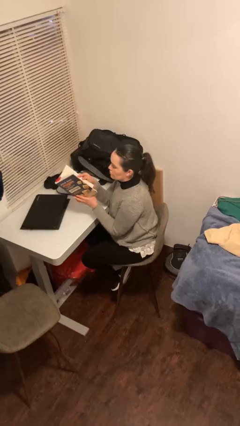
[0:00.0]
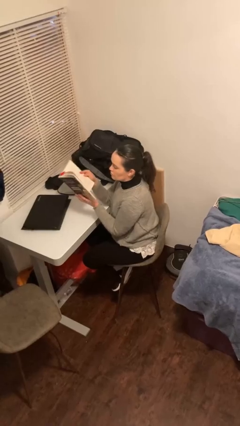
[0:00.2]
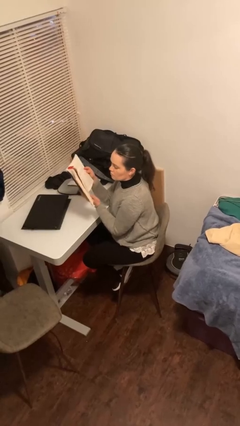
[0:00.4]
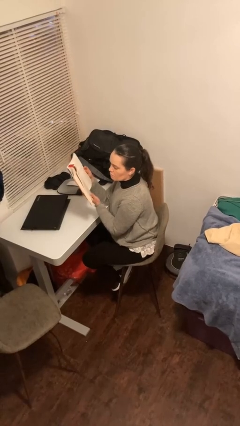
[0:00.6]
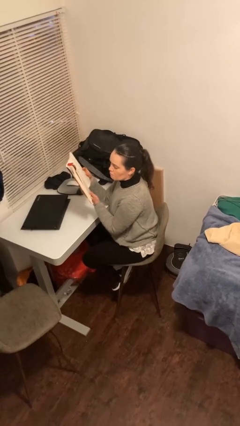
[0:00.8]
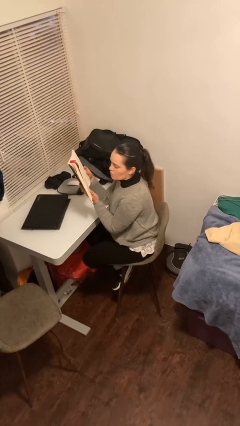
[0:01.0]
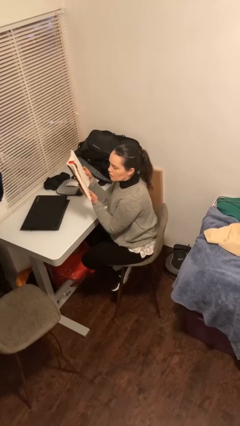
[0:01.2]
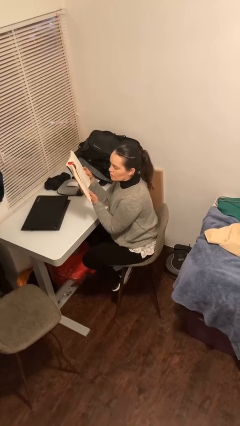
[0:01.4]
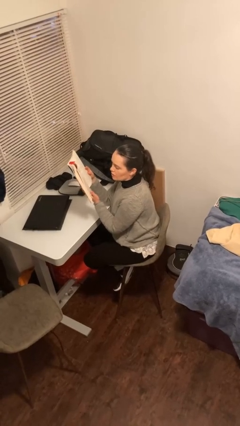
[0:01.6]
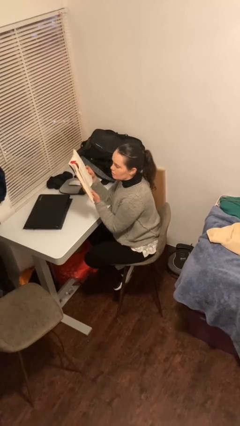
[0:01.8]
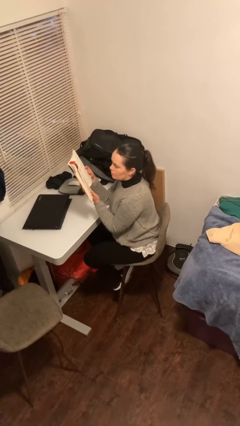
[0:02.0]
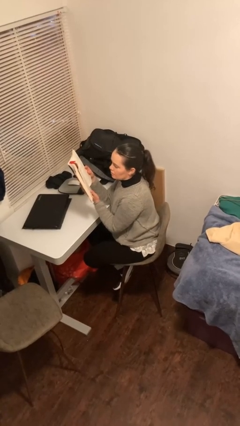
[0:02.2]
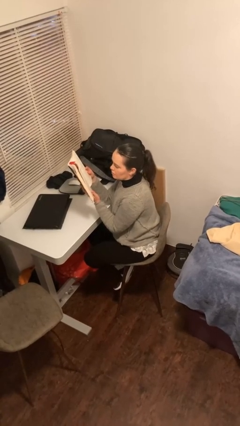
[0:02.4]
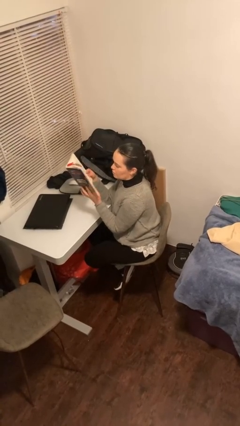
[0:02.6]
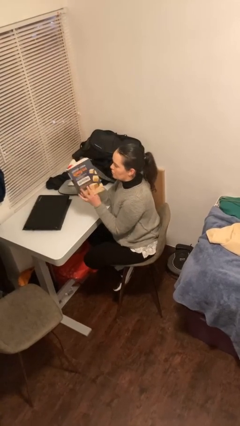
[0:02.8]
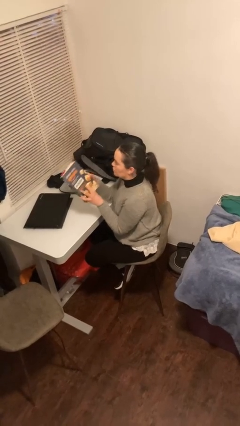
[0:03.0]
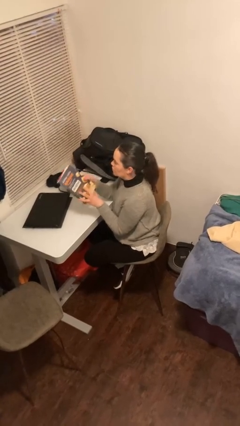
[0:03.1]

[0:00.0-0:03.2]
person reads document

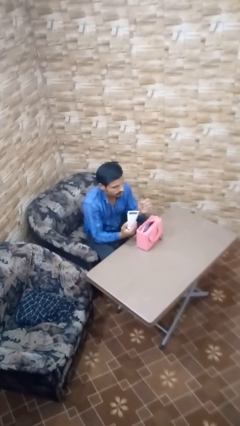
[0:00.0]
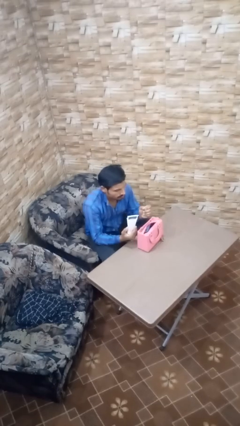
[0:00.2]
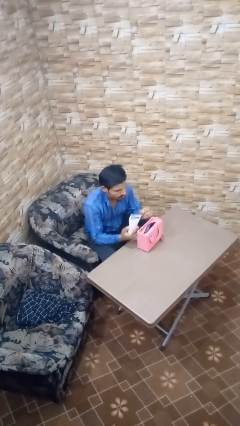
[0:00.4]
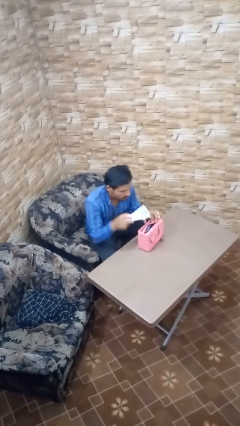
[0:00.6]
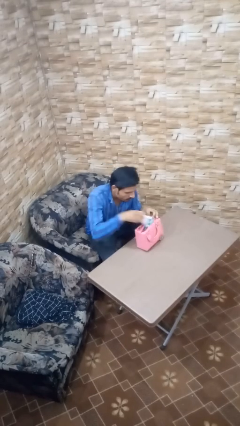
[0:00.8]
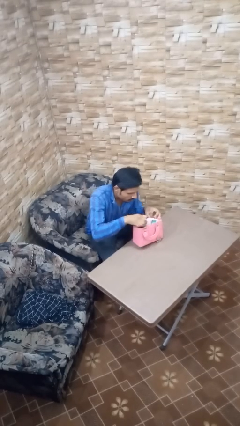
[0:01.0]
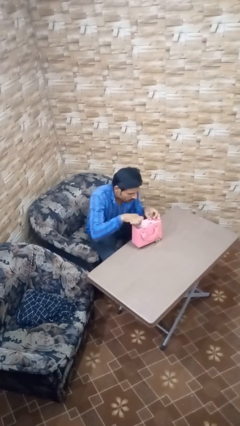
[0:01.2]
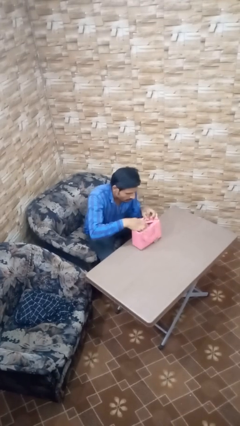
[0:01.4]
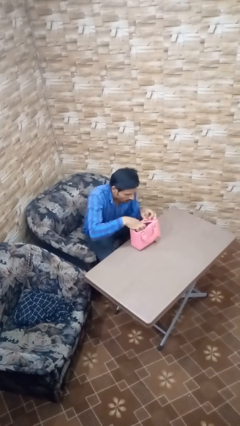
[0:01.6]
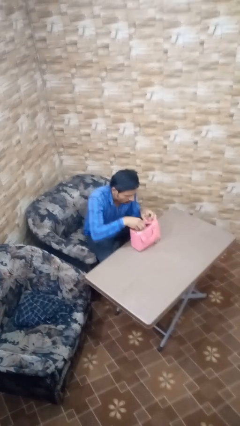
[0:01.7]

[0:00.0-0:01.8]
person puts object into purse

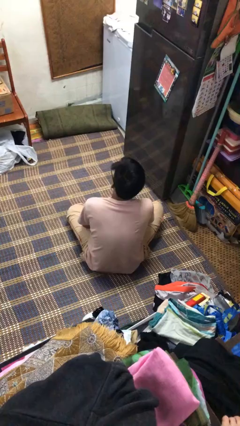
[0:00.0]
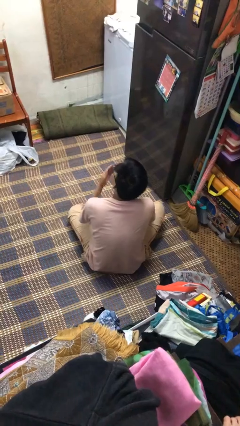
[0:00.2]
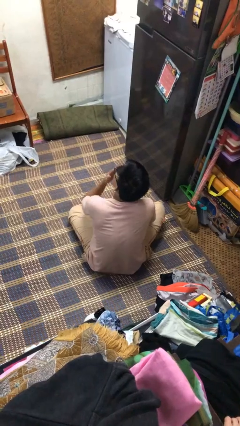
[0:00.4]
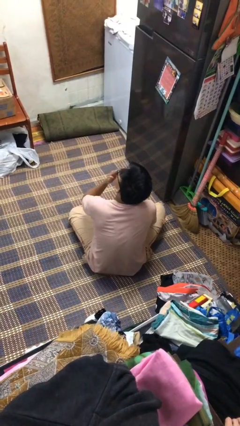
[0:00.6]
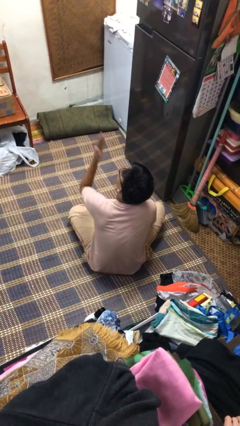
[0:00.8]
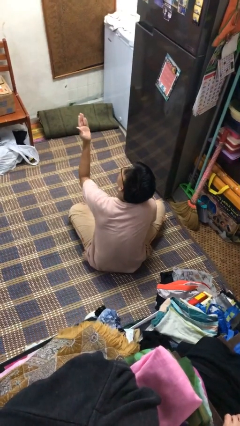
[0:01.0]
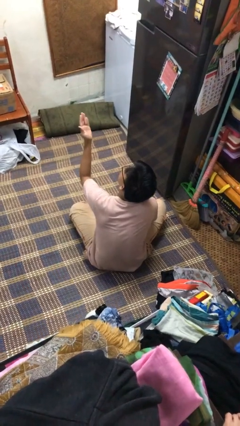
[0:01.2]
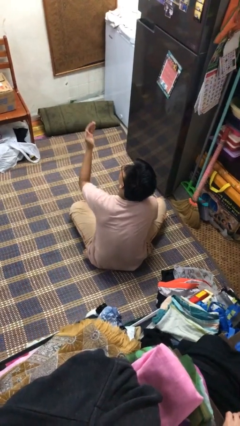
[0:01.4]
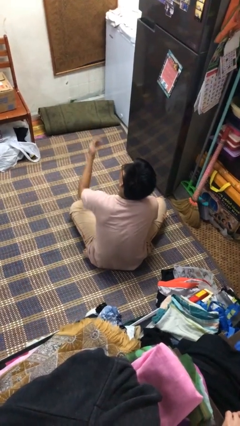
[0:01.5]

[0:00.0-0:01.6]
person gestures blow kiss

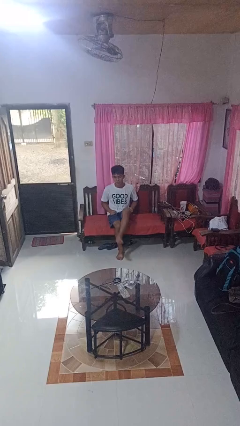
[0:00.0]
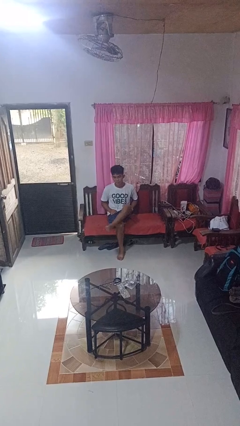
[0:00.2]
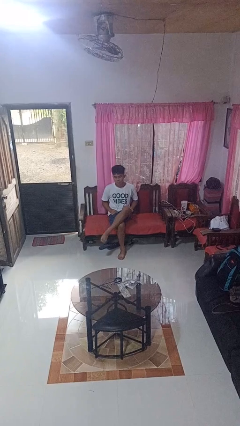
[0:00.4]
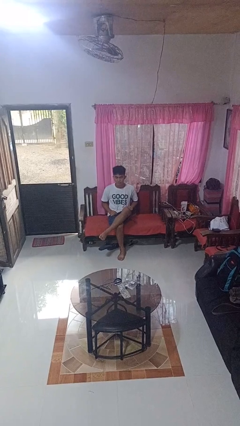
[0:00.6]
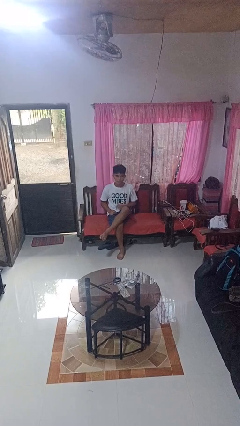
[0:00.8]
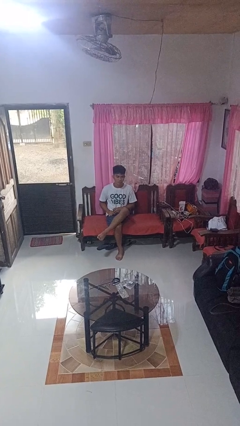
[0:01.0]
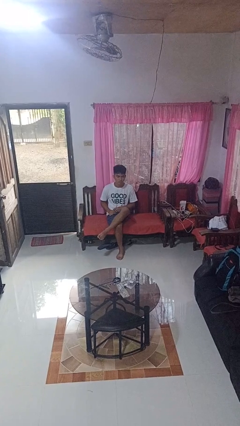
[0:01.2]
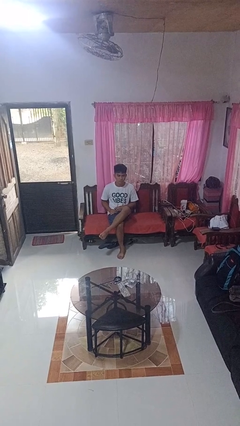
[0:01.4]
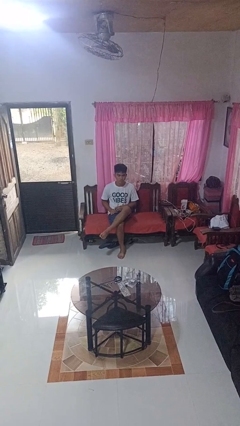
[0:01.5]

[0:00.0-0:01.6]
person crosses legs

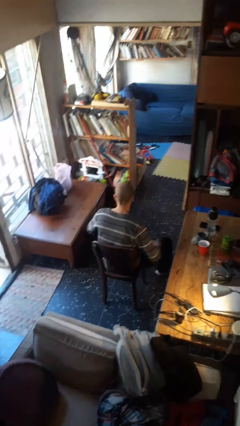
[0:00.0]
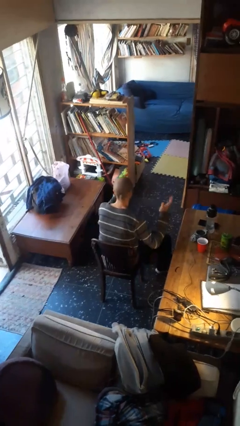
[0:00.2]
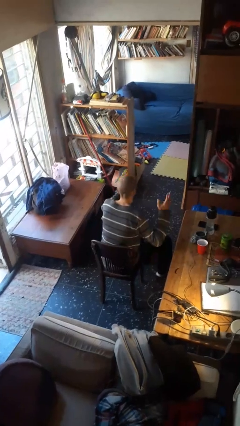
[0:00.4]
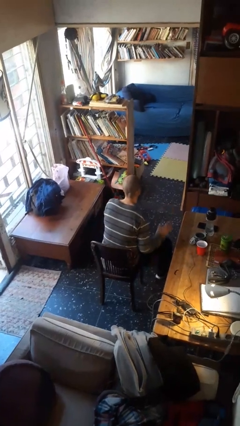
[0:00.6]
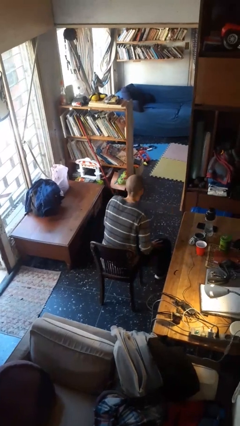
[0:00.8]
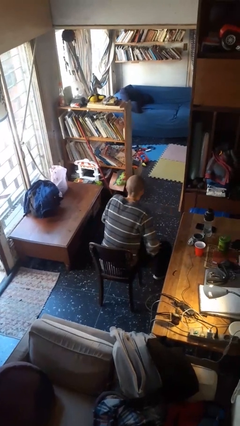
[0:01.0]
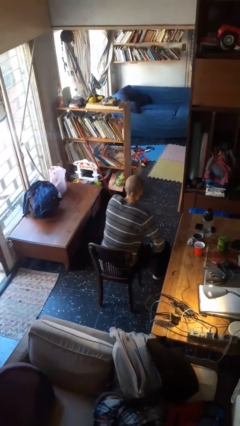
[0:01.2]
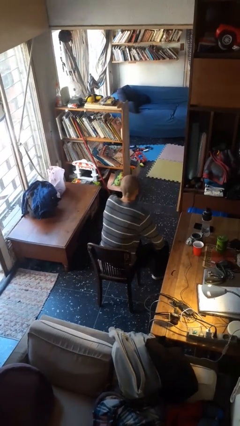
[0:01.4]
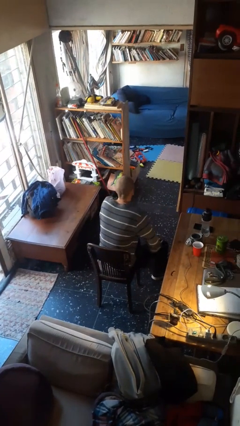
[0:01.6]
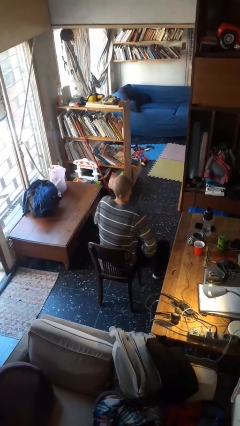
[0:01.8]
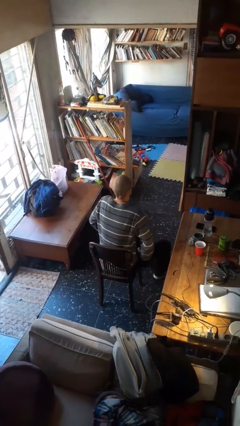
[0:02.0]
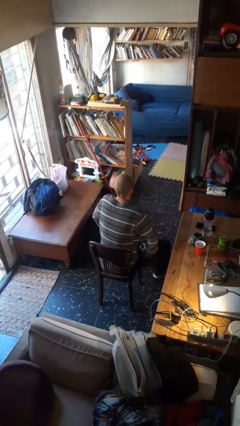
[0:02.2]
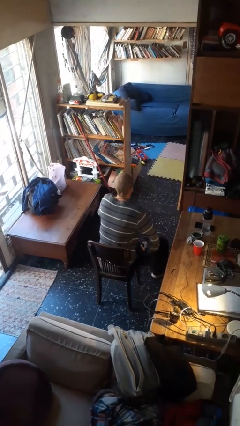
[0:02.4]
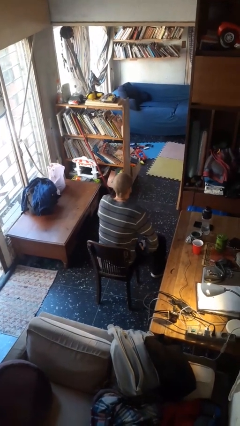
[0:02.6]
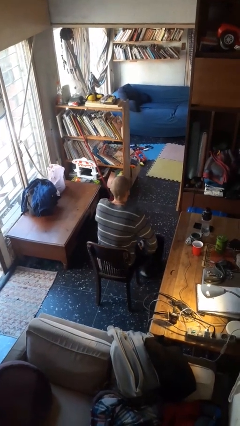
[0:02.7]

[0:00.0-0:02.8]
person slaps hands on thighs

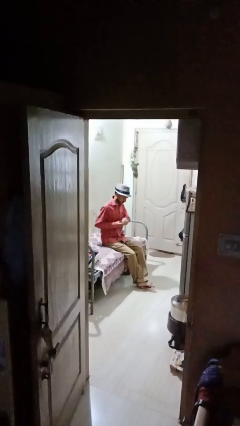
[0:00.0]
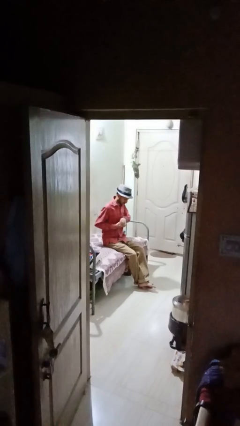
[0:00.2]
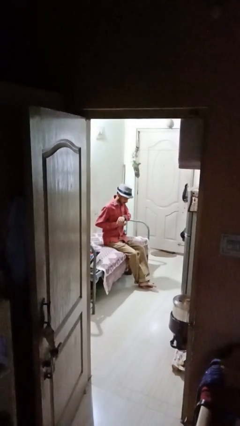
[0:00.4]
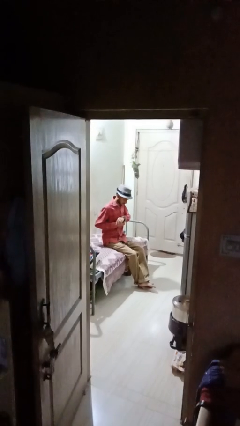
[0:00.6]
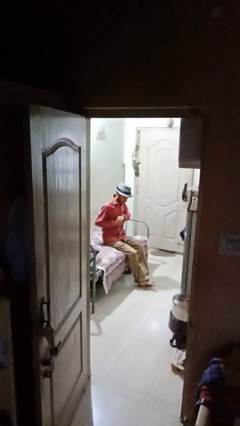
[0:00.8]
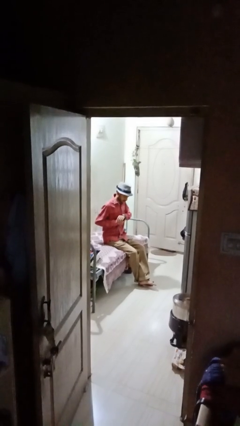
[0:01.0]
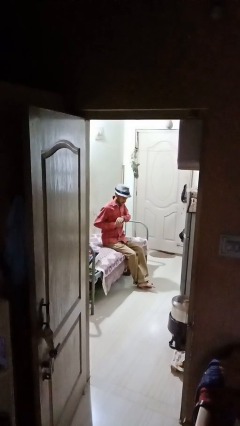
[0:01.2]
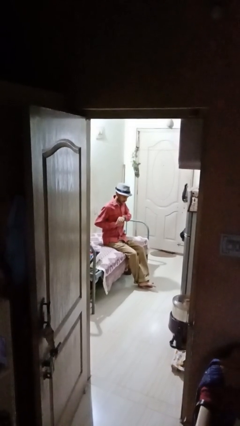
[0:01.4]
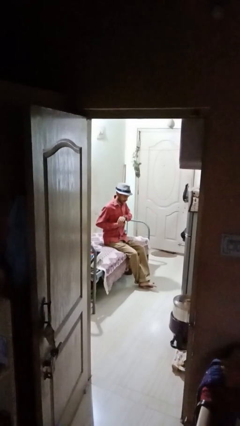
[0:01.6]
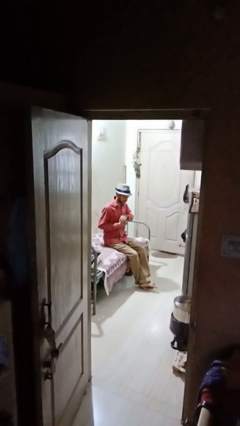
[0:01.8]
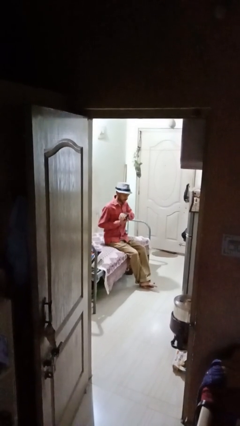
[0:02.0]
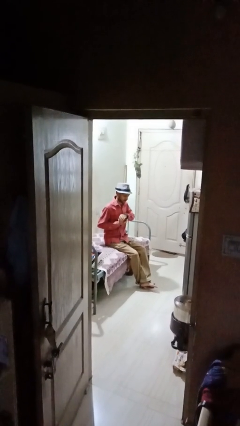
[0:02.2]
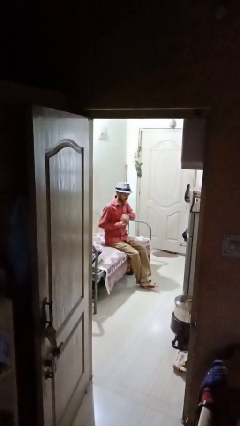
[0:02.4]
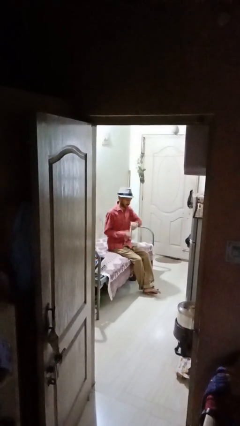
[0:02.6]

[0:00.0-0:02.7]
person puts on wristwatch

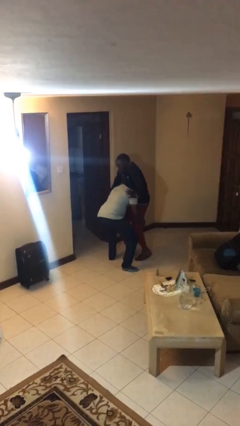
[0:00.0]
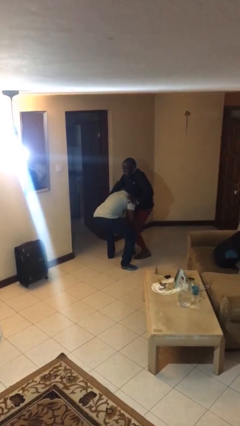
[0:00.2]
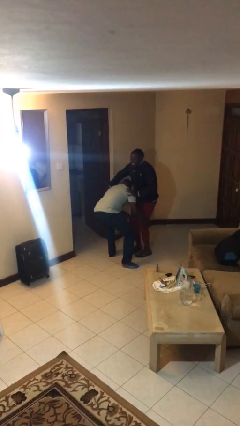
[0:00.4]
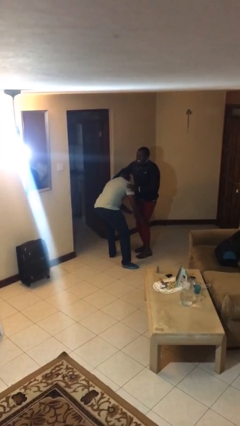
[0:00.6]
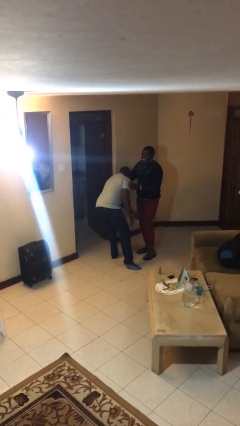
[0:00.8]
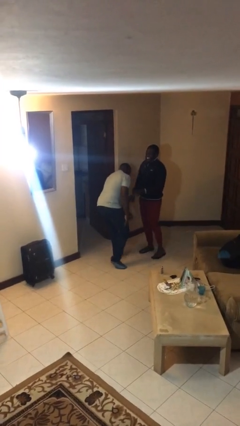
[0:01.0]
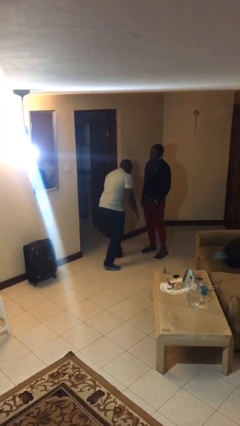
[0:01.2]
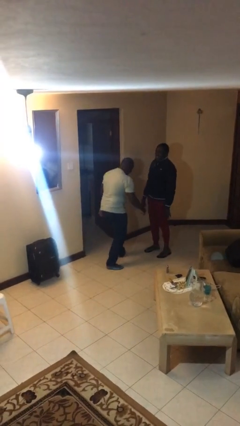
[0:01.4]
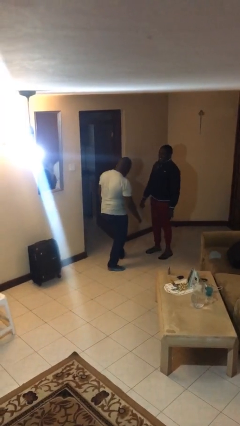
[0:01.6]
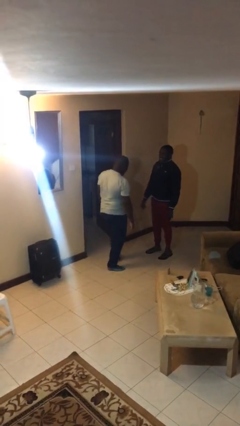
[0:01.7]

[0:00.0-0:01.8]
person puts down person

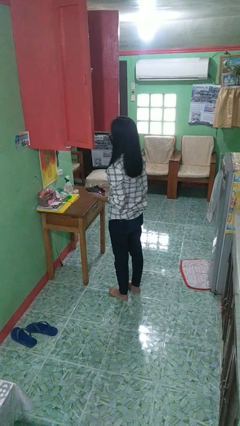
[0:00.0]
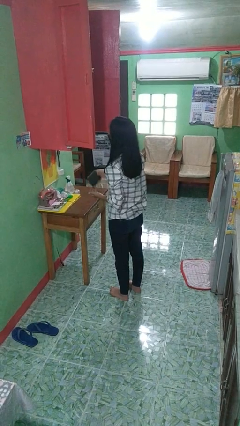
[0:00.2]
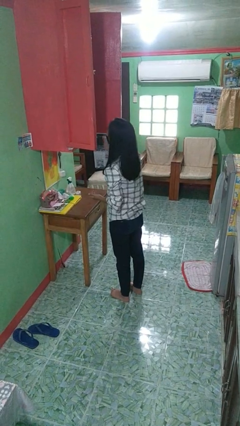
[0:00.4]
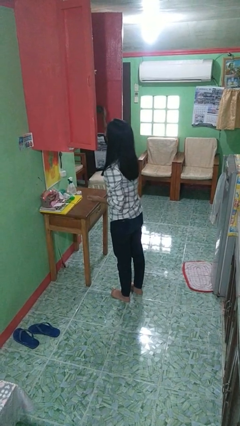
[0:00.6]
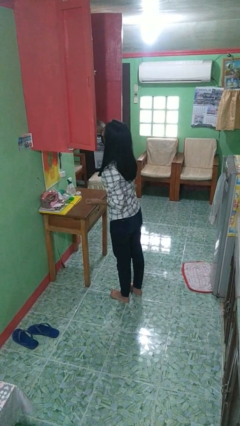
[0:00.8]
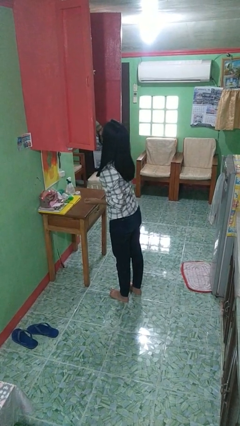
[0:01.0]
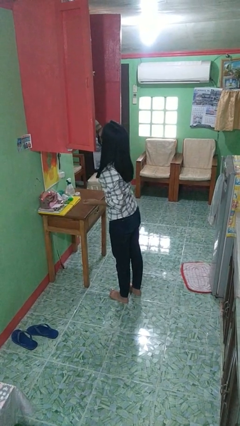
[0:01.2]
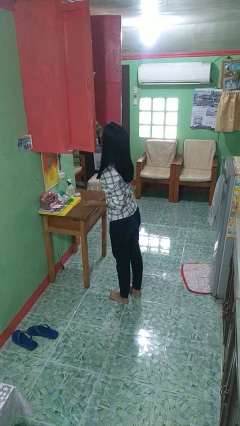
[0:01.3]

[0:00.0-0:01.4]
person puts down object into cabinet
